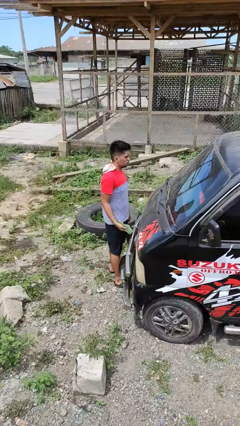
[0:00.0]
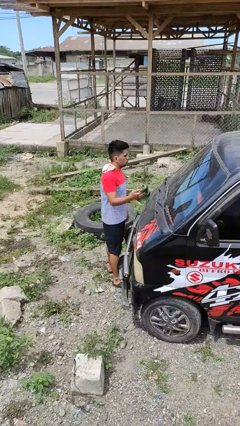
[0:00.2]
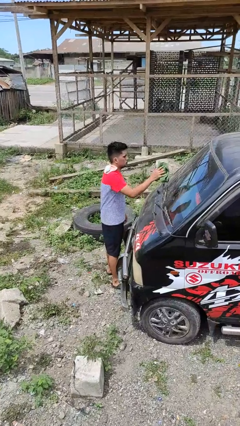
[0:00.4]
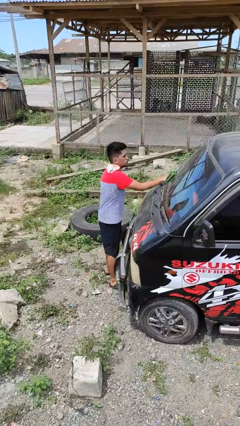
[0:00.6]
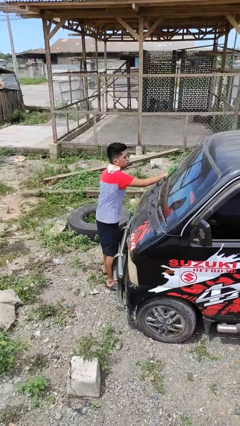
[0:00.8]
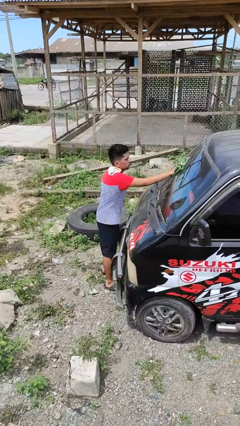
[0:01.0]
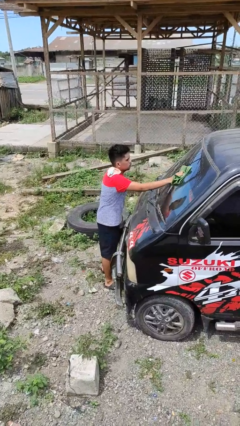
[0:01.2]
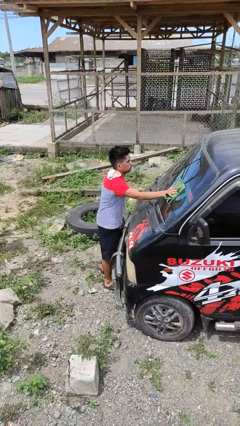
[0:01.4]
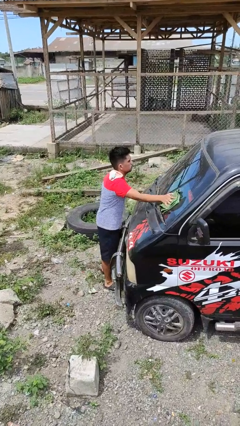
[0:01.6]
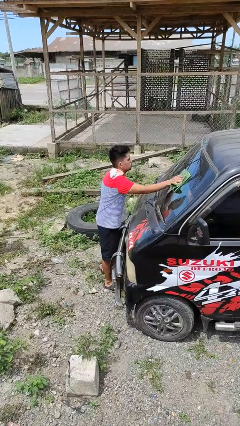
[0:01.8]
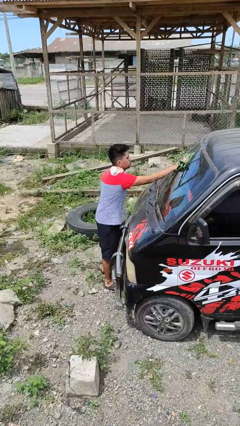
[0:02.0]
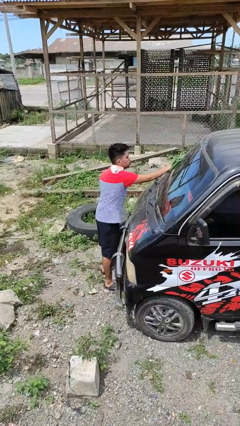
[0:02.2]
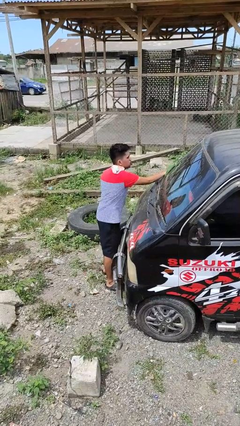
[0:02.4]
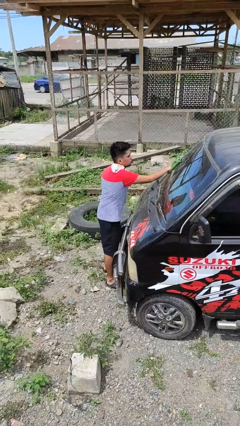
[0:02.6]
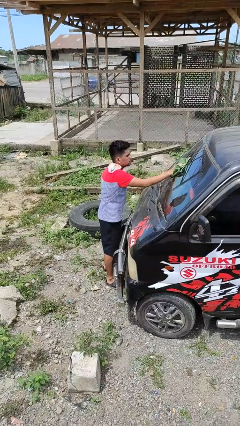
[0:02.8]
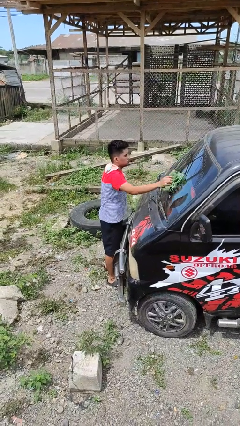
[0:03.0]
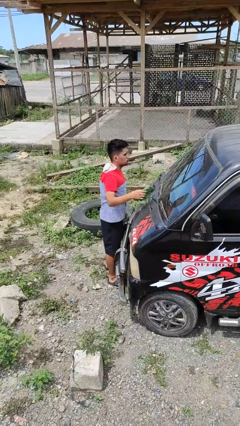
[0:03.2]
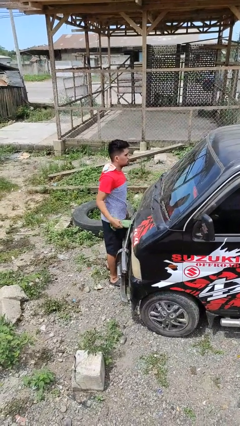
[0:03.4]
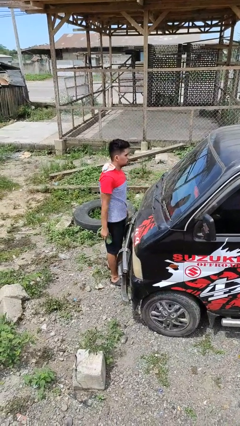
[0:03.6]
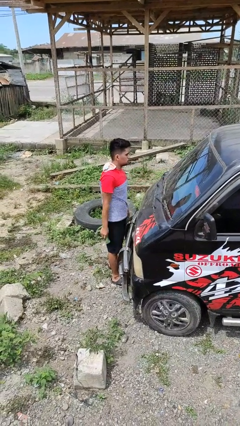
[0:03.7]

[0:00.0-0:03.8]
person polishes car with rag

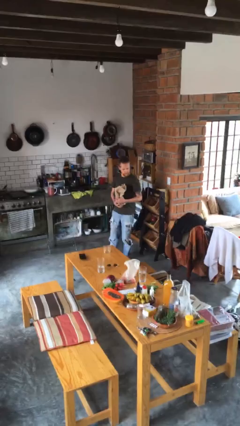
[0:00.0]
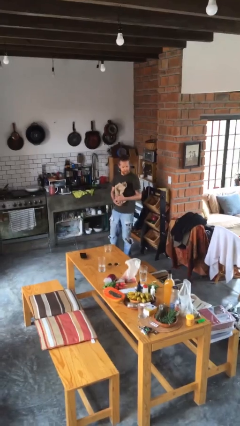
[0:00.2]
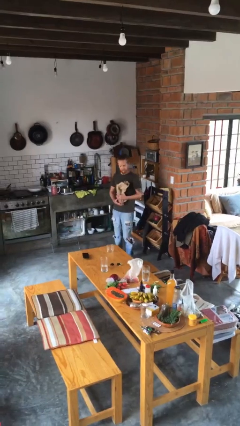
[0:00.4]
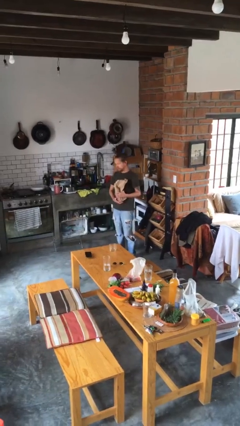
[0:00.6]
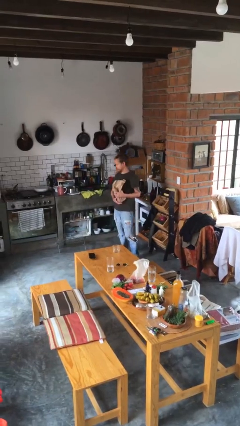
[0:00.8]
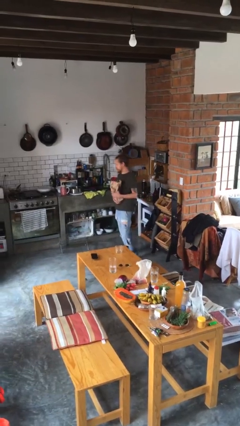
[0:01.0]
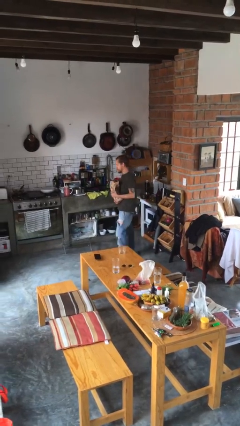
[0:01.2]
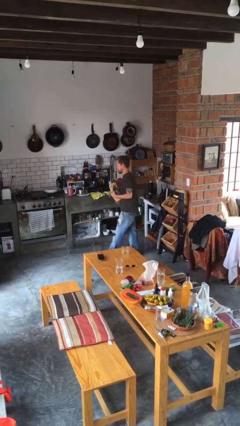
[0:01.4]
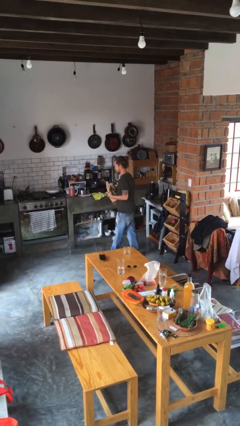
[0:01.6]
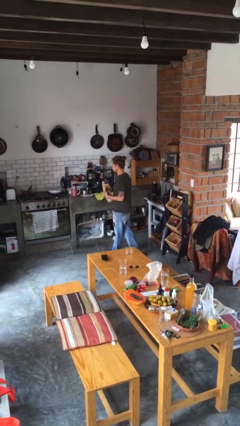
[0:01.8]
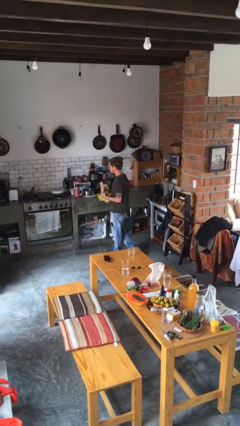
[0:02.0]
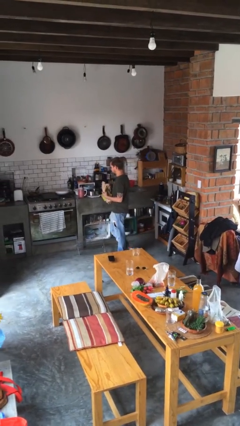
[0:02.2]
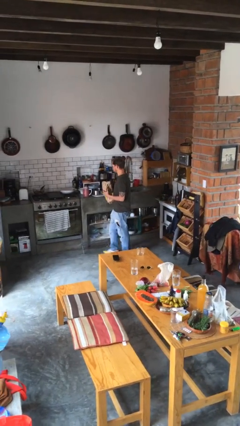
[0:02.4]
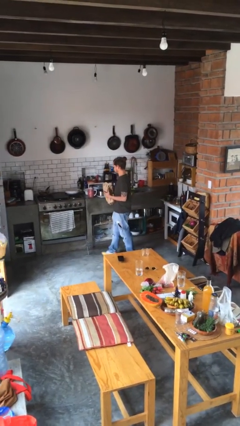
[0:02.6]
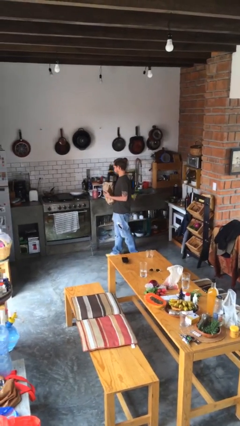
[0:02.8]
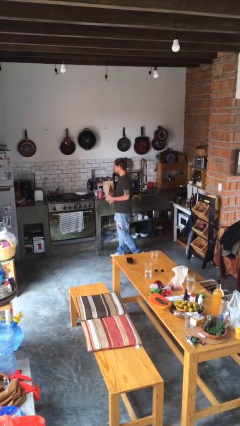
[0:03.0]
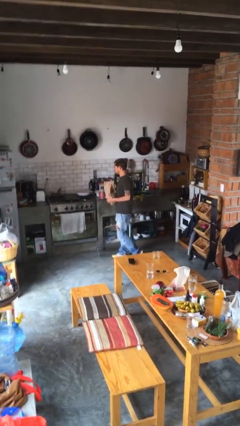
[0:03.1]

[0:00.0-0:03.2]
person carries groceries

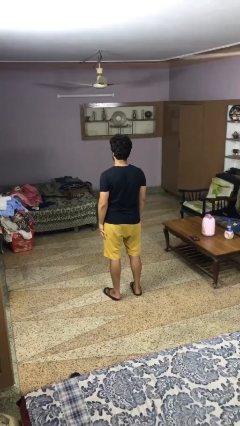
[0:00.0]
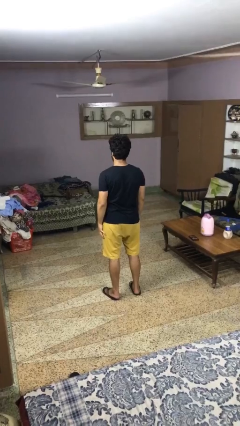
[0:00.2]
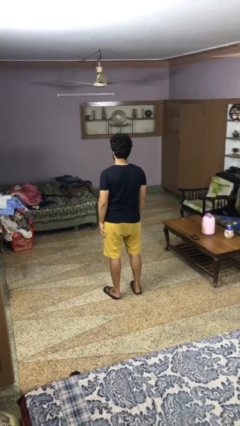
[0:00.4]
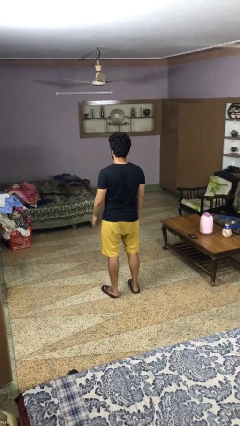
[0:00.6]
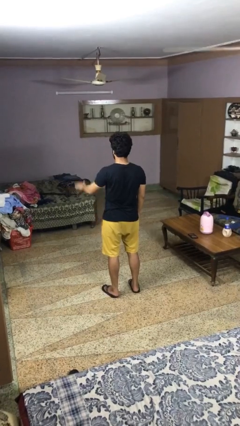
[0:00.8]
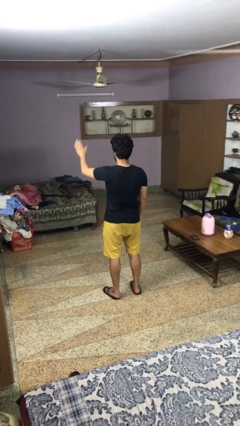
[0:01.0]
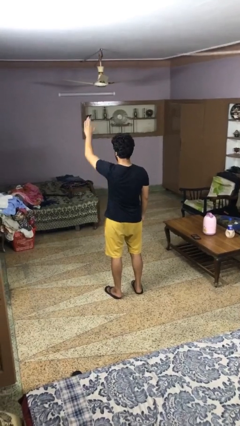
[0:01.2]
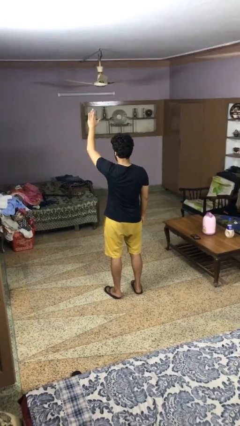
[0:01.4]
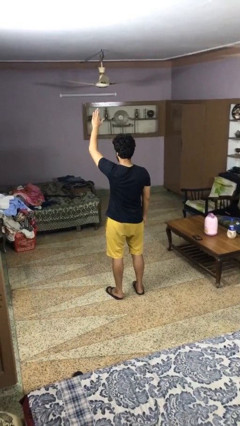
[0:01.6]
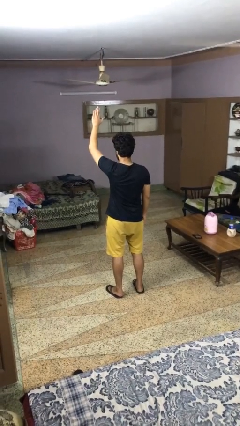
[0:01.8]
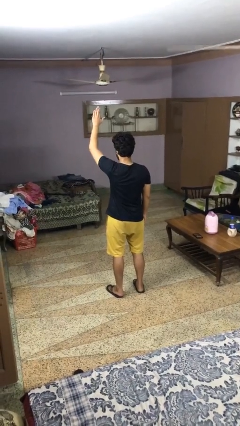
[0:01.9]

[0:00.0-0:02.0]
person gestures raise hand

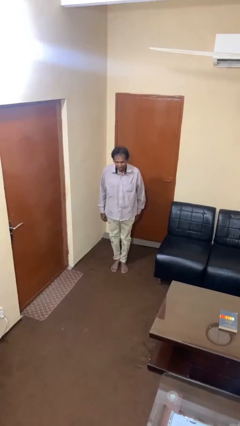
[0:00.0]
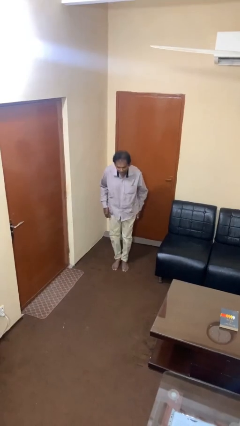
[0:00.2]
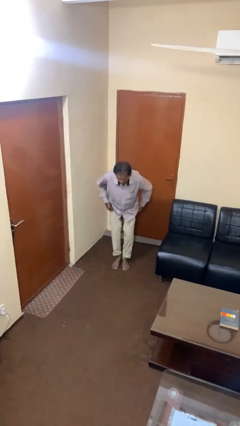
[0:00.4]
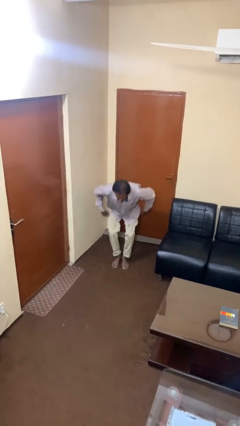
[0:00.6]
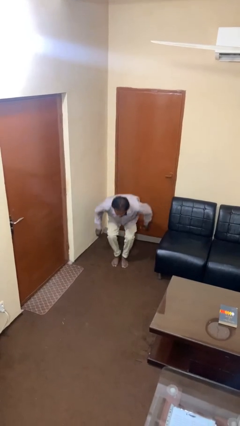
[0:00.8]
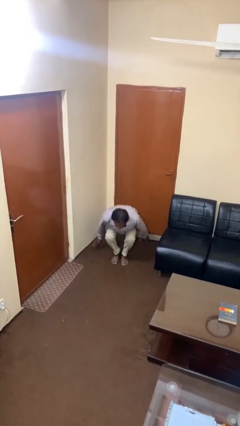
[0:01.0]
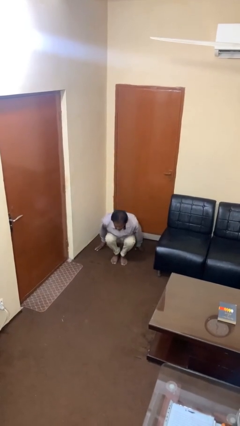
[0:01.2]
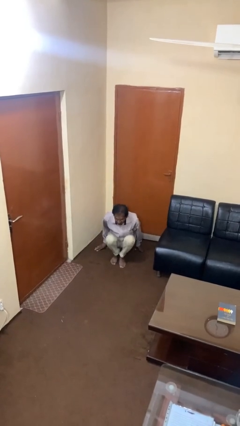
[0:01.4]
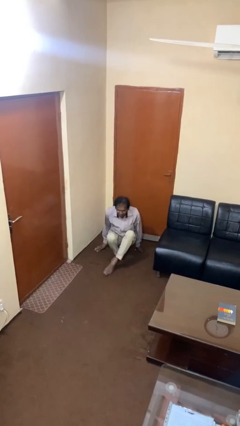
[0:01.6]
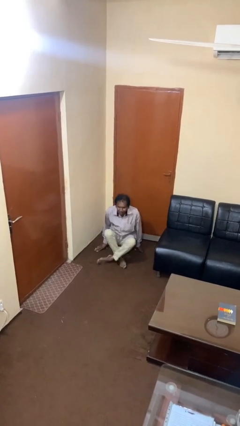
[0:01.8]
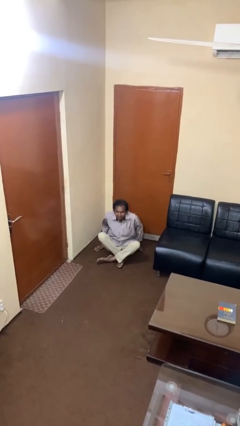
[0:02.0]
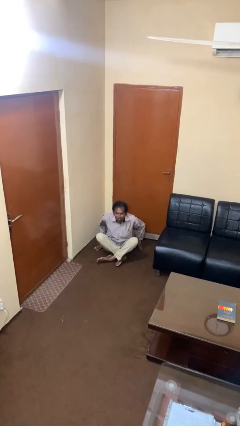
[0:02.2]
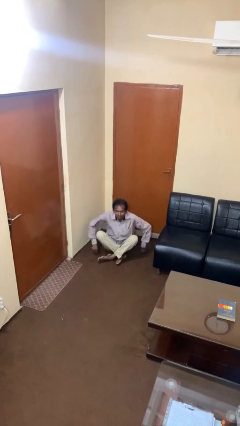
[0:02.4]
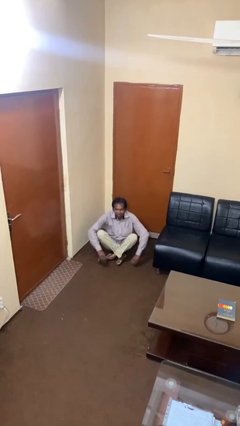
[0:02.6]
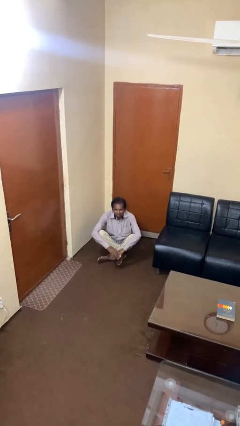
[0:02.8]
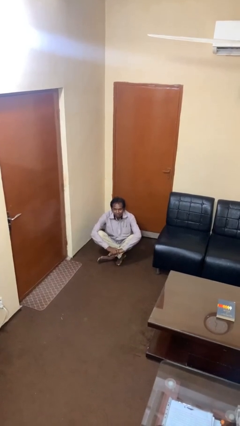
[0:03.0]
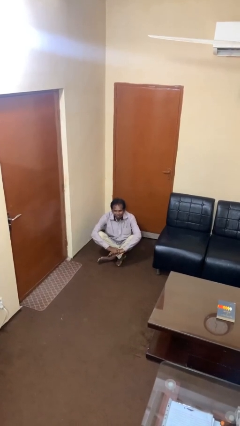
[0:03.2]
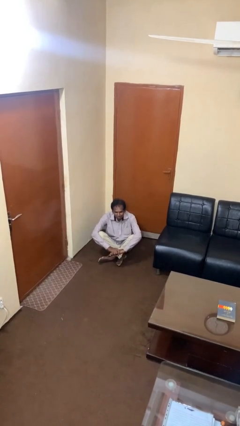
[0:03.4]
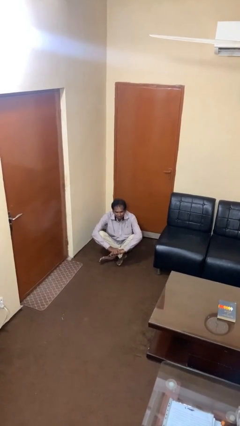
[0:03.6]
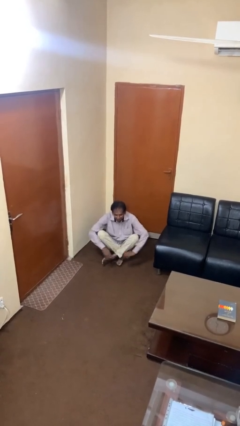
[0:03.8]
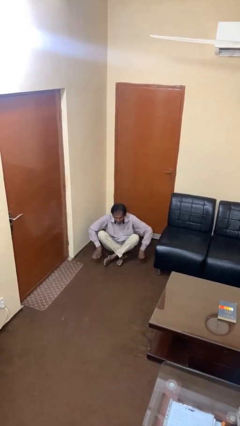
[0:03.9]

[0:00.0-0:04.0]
person sits crisscross

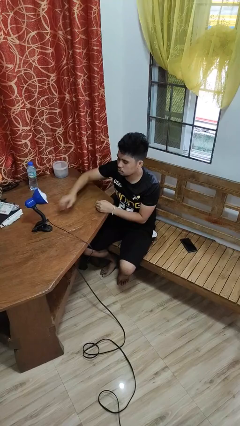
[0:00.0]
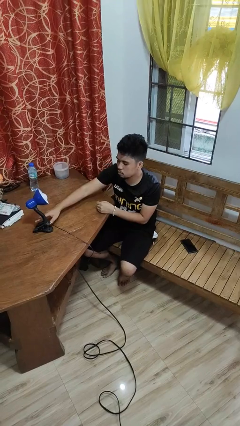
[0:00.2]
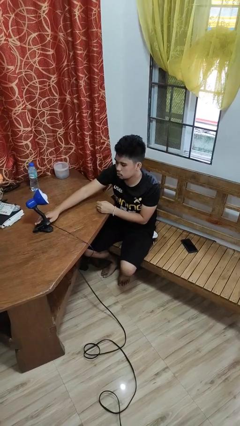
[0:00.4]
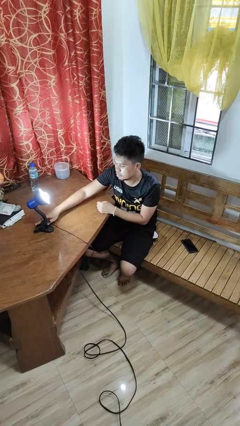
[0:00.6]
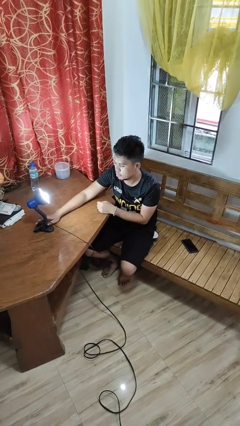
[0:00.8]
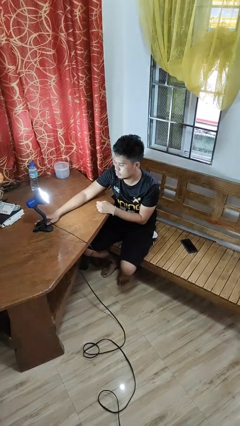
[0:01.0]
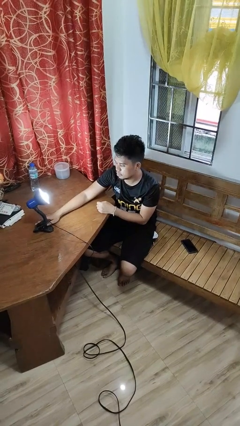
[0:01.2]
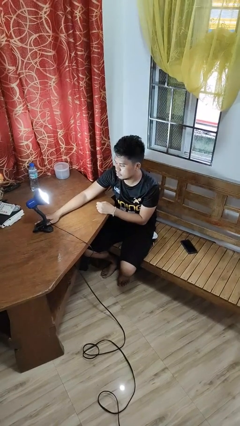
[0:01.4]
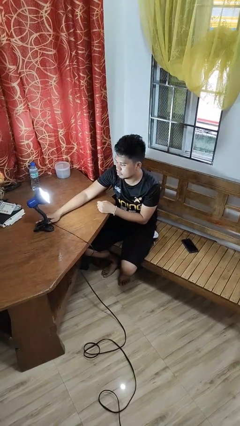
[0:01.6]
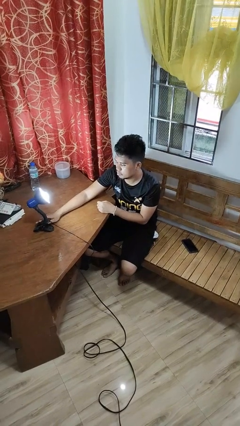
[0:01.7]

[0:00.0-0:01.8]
person turns on lamp

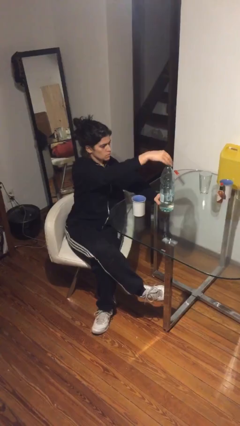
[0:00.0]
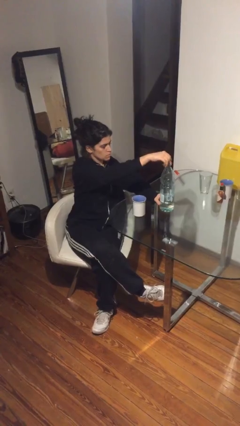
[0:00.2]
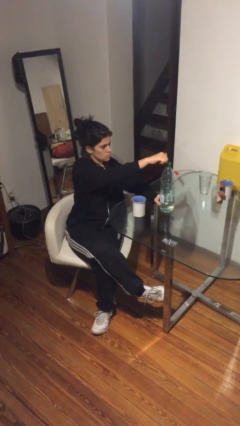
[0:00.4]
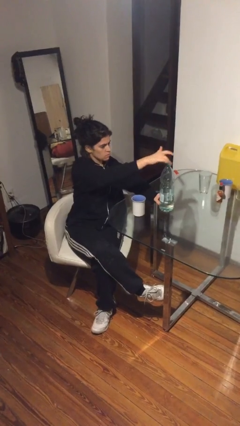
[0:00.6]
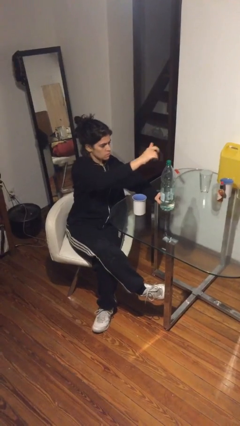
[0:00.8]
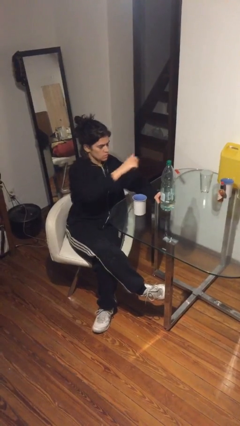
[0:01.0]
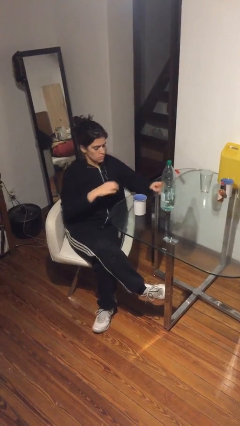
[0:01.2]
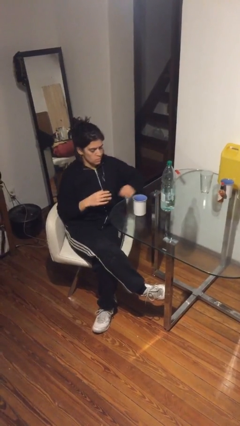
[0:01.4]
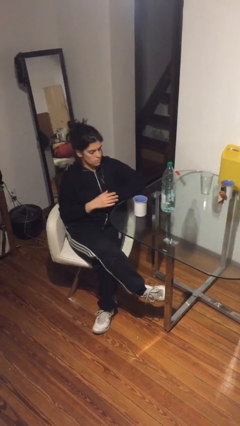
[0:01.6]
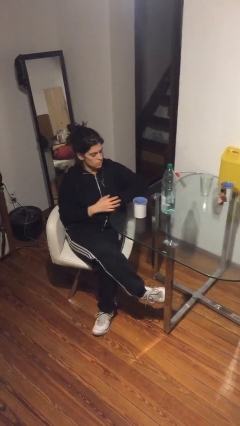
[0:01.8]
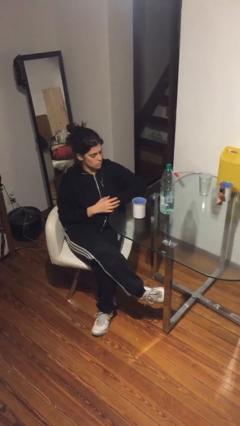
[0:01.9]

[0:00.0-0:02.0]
person screws lid to bottle

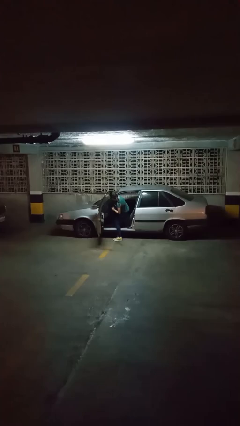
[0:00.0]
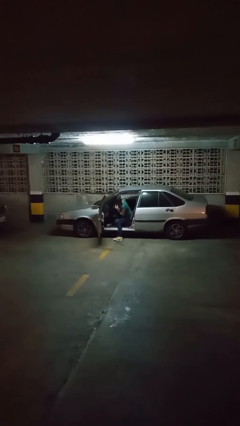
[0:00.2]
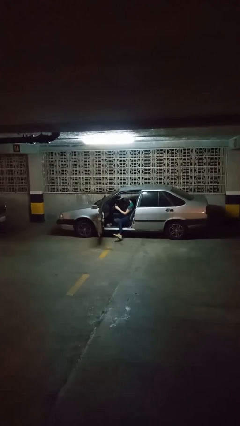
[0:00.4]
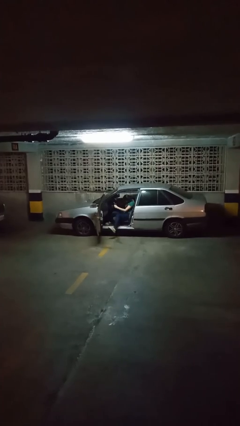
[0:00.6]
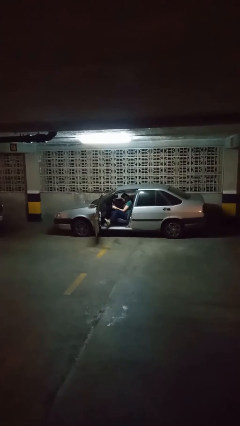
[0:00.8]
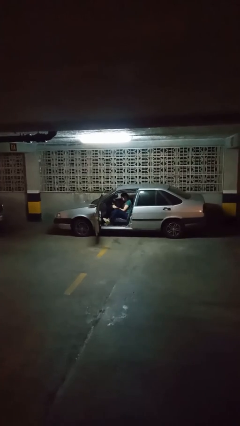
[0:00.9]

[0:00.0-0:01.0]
person enters car
